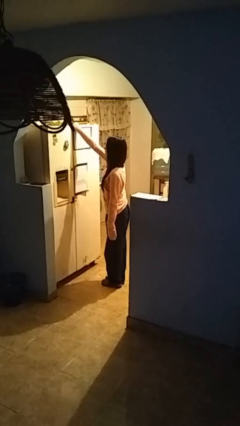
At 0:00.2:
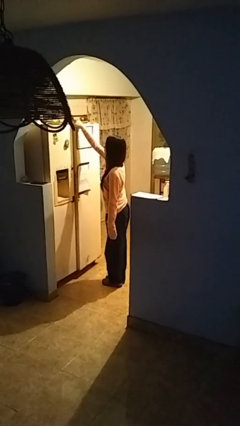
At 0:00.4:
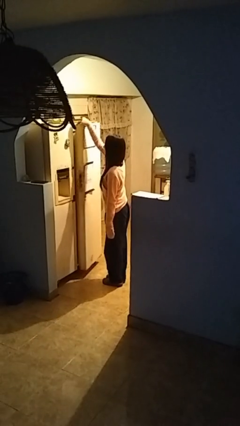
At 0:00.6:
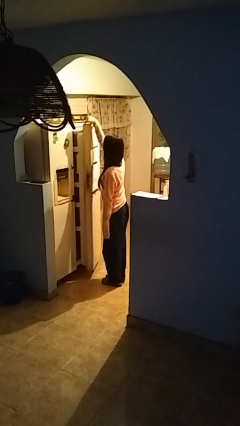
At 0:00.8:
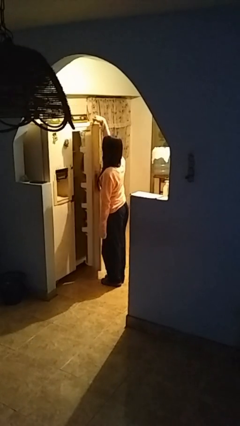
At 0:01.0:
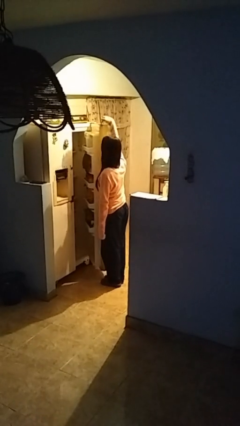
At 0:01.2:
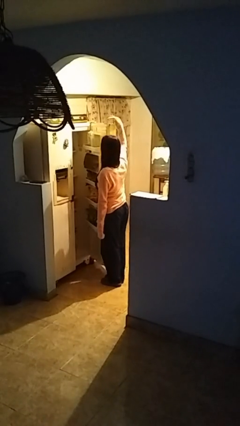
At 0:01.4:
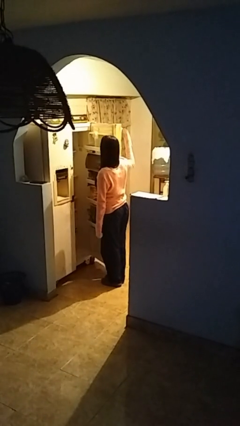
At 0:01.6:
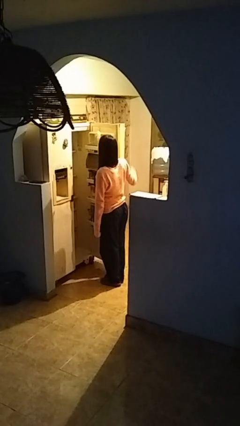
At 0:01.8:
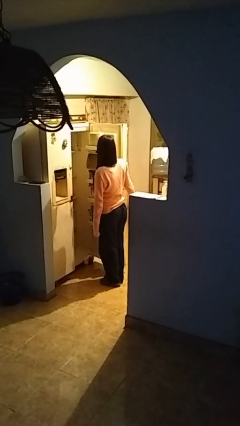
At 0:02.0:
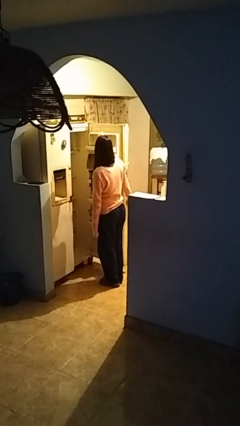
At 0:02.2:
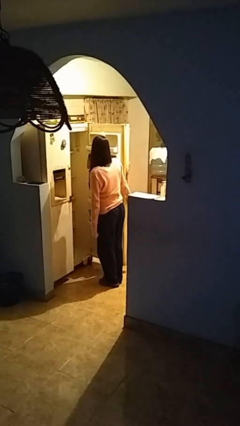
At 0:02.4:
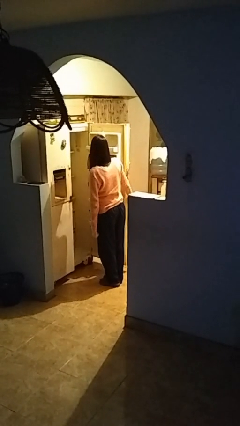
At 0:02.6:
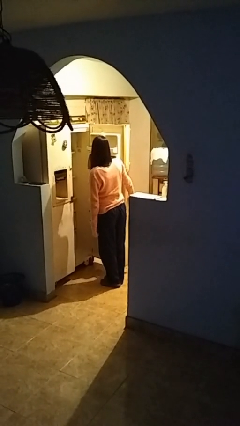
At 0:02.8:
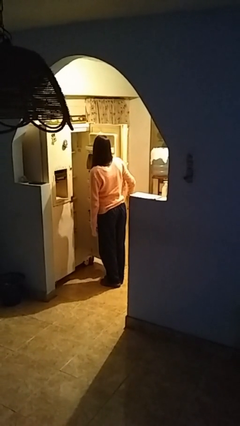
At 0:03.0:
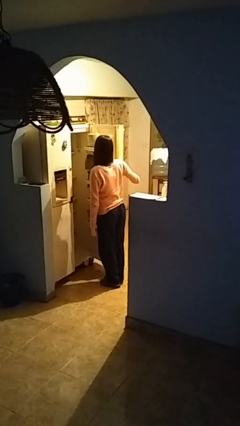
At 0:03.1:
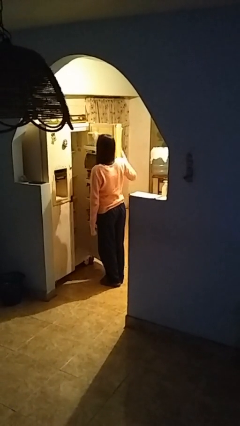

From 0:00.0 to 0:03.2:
person opens refrigerator

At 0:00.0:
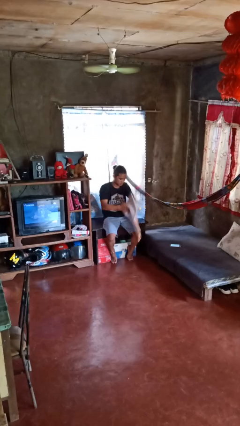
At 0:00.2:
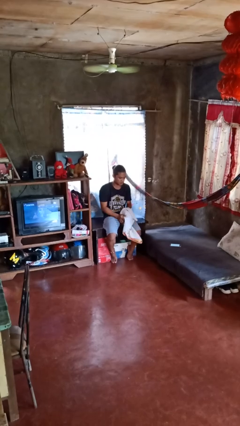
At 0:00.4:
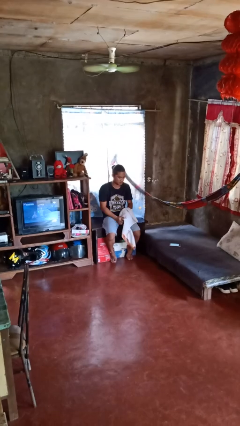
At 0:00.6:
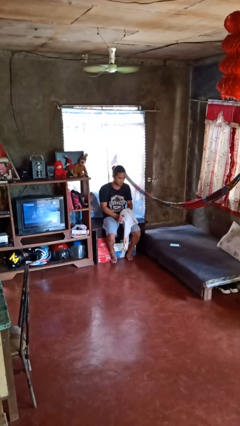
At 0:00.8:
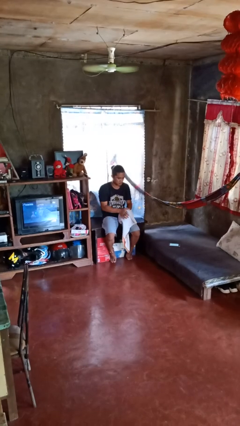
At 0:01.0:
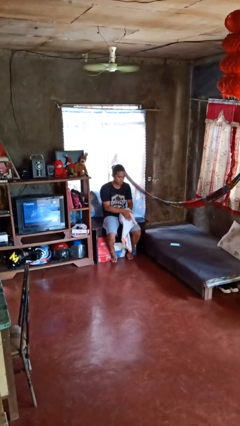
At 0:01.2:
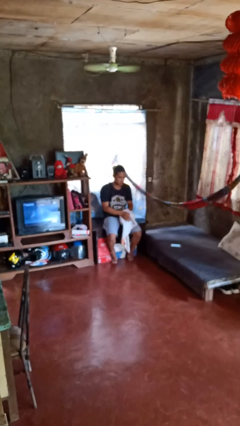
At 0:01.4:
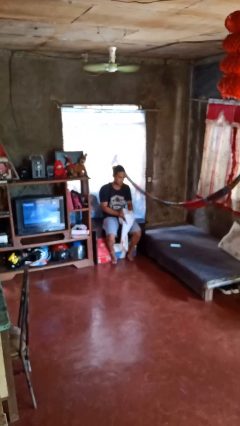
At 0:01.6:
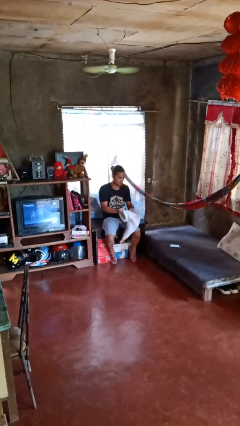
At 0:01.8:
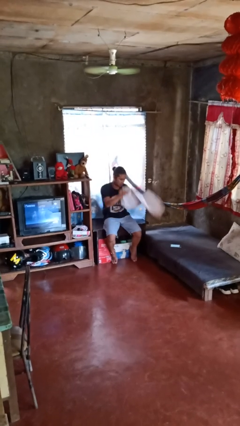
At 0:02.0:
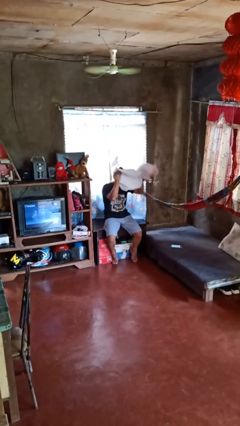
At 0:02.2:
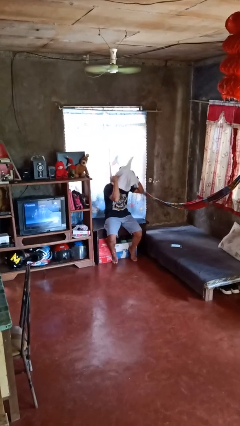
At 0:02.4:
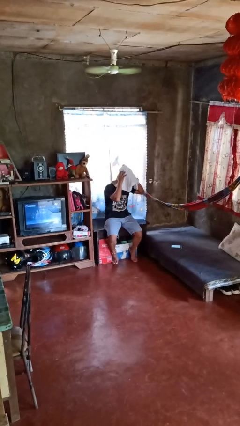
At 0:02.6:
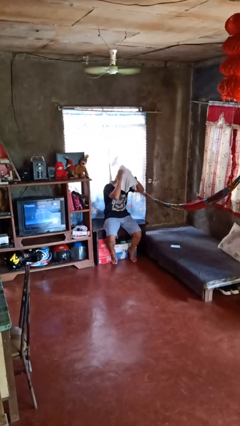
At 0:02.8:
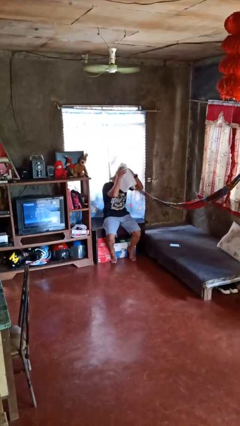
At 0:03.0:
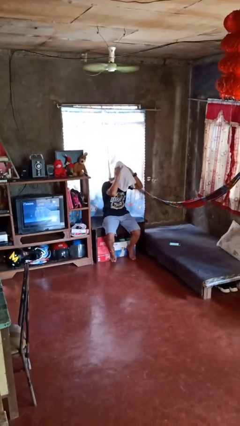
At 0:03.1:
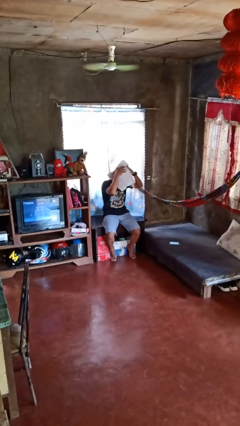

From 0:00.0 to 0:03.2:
person wraps box

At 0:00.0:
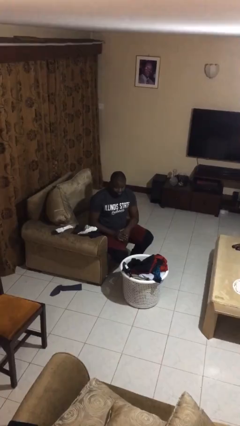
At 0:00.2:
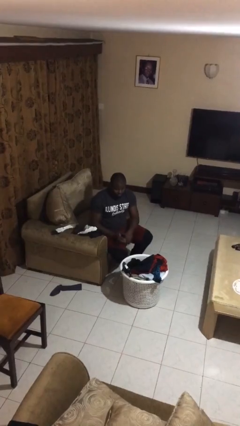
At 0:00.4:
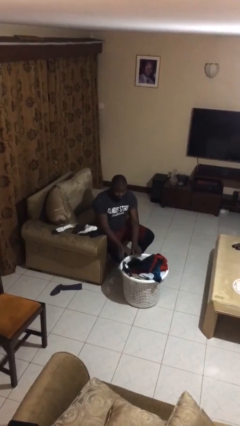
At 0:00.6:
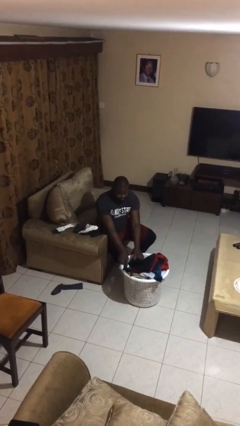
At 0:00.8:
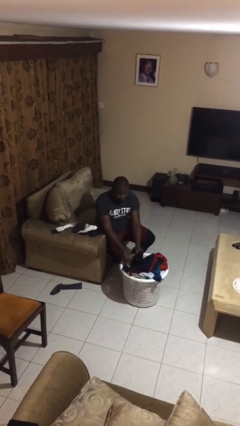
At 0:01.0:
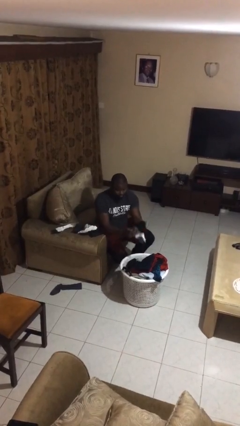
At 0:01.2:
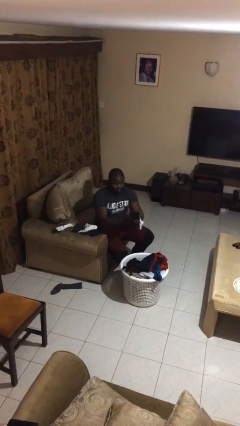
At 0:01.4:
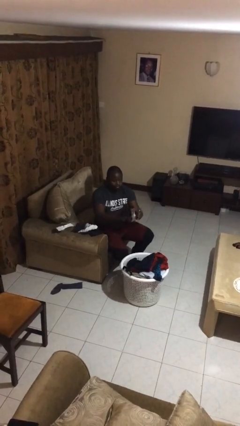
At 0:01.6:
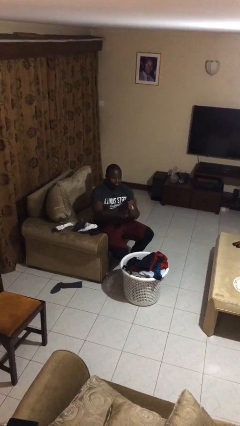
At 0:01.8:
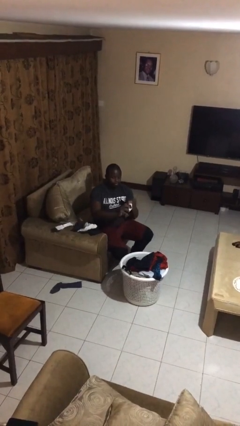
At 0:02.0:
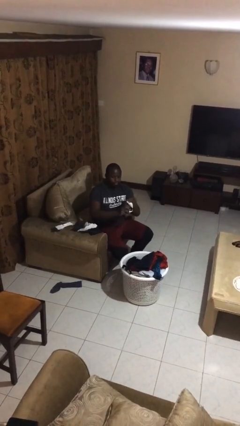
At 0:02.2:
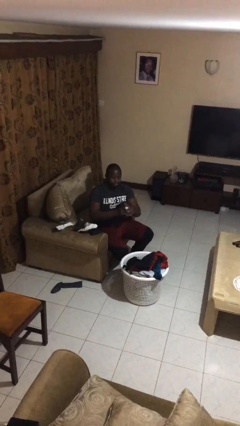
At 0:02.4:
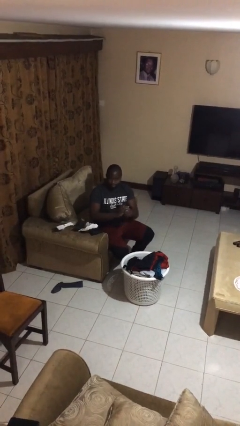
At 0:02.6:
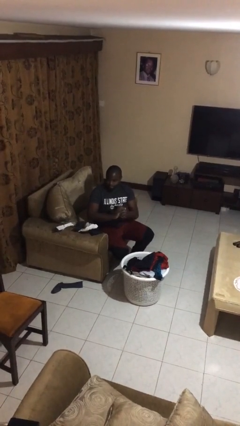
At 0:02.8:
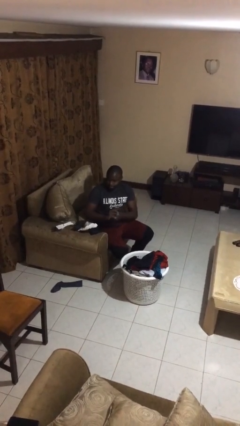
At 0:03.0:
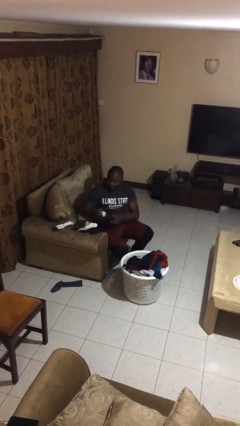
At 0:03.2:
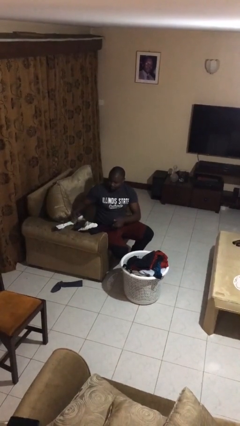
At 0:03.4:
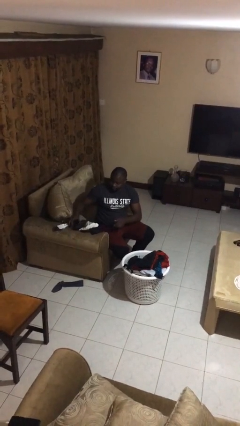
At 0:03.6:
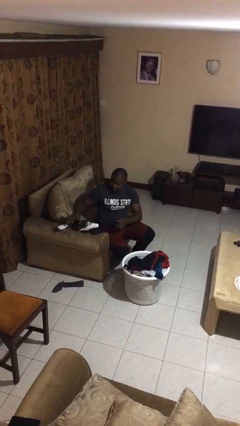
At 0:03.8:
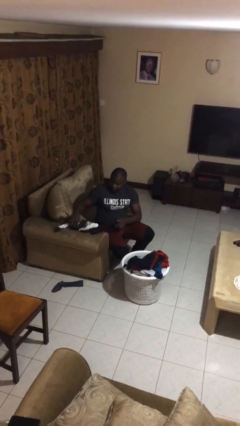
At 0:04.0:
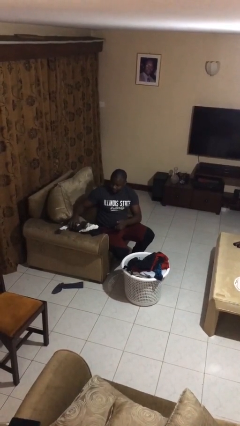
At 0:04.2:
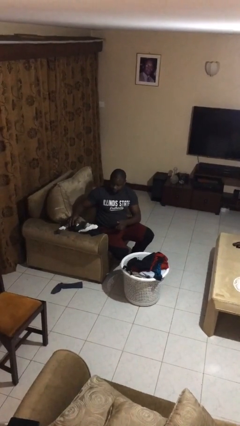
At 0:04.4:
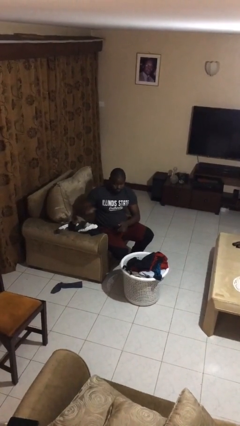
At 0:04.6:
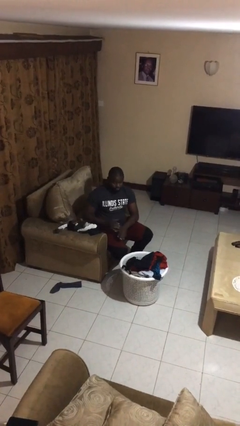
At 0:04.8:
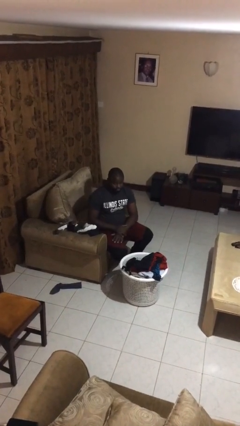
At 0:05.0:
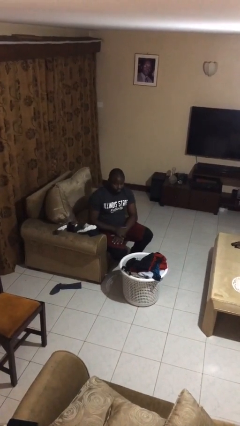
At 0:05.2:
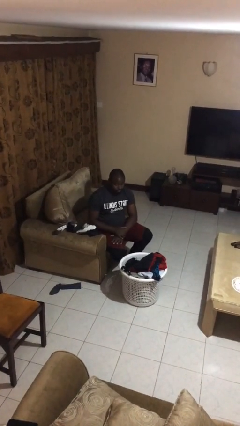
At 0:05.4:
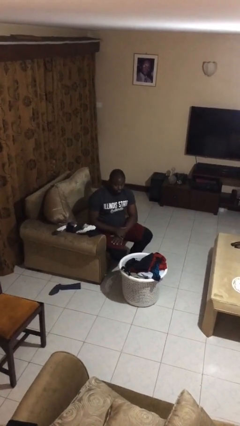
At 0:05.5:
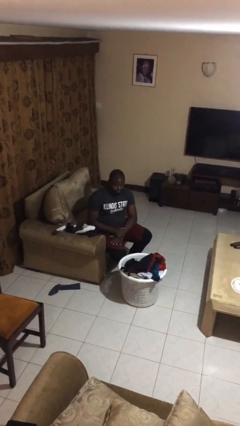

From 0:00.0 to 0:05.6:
person folds socks

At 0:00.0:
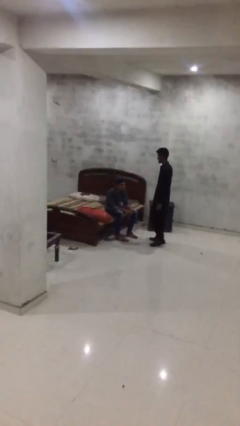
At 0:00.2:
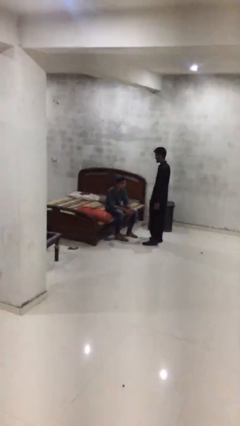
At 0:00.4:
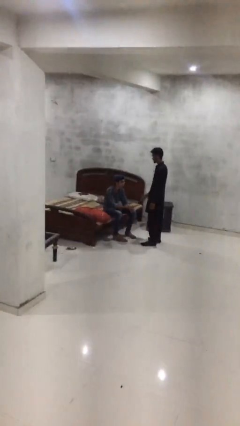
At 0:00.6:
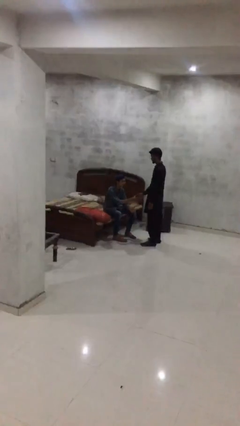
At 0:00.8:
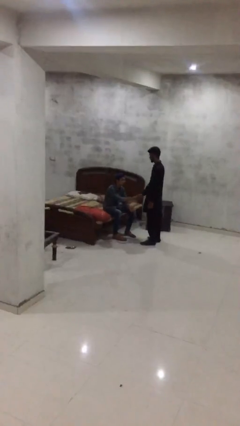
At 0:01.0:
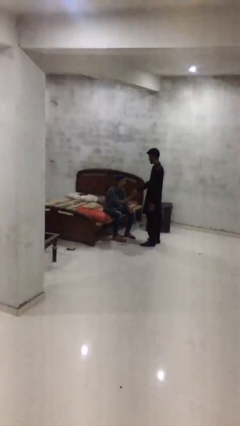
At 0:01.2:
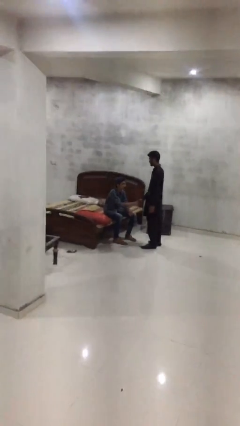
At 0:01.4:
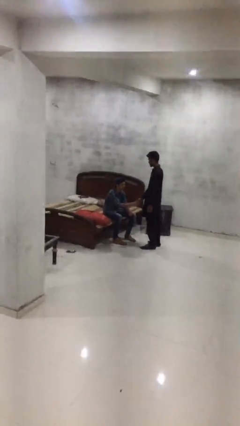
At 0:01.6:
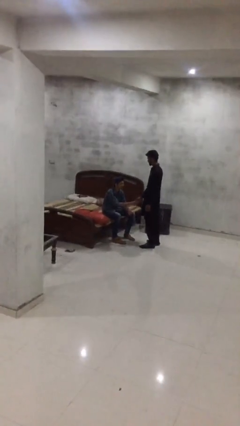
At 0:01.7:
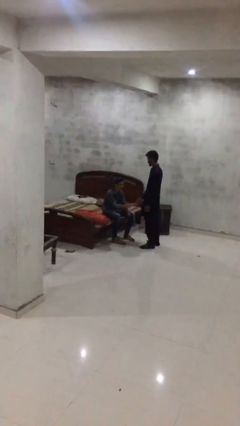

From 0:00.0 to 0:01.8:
person shakes hand

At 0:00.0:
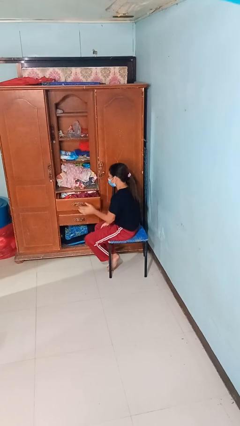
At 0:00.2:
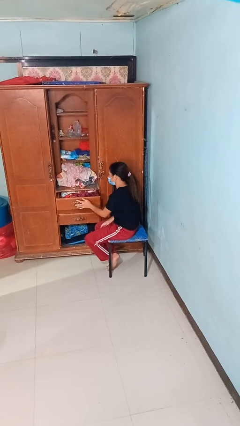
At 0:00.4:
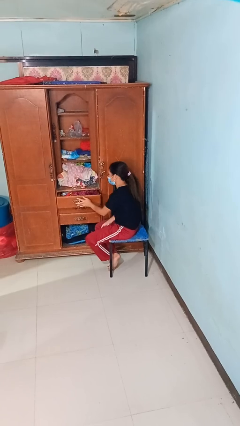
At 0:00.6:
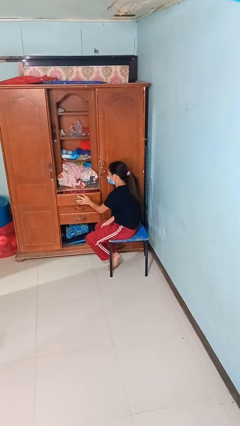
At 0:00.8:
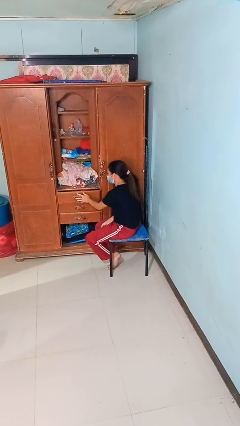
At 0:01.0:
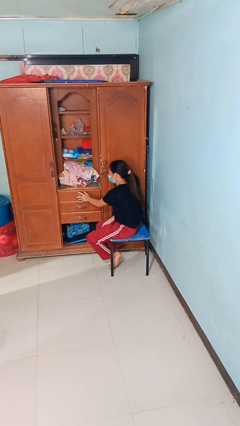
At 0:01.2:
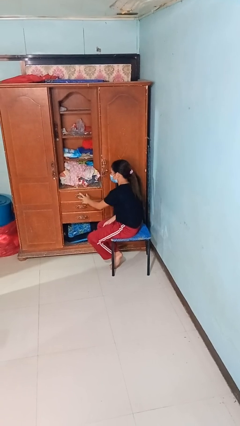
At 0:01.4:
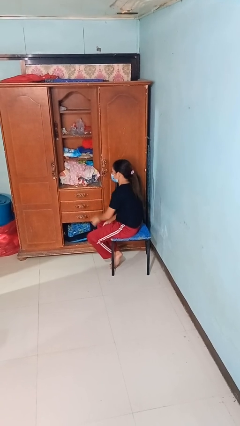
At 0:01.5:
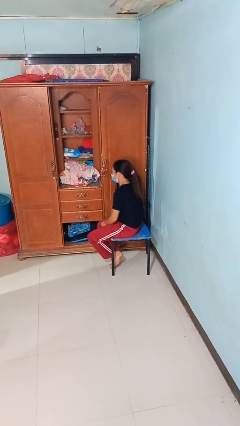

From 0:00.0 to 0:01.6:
person closes dresser drawer

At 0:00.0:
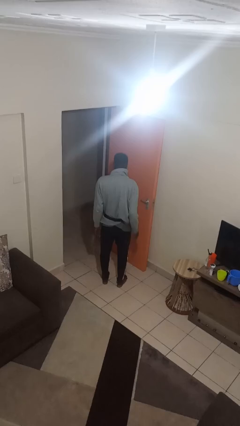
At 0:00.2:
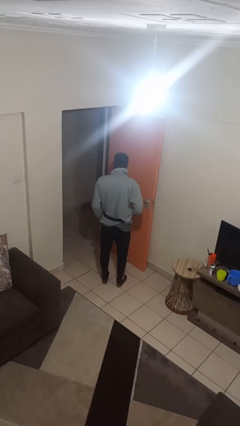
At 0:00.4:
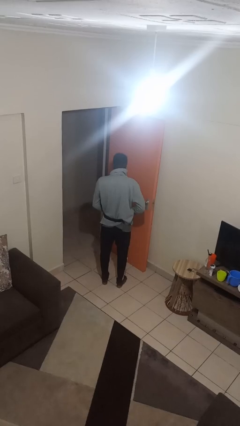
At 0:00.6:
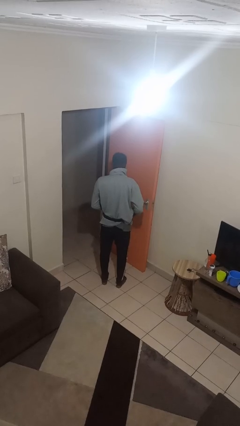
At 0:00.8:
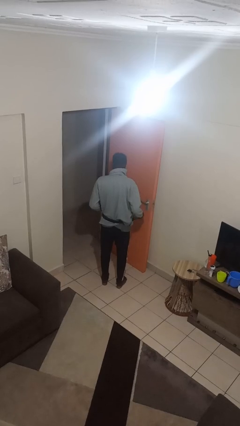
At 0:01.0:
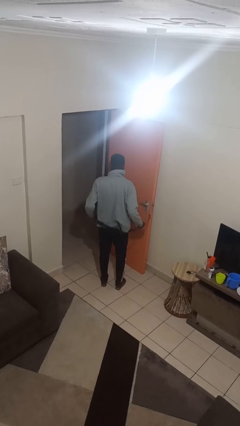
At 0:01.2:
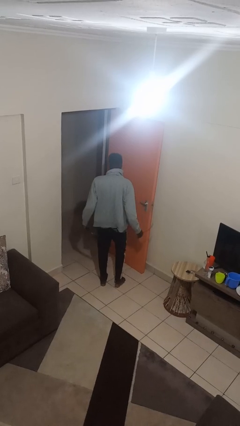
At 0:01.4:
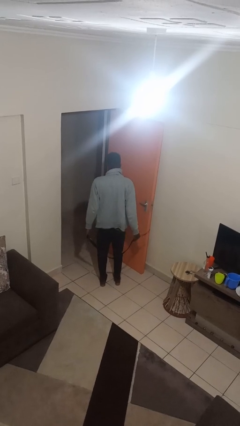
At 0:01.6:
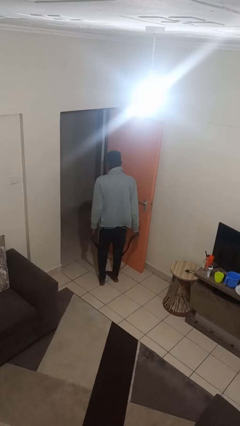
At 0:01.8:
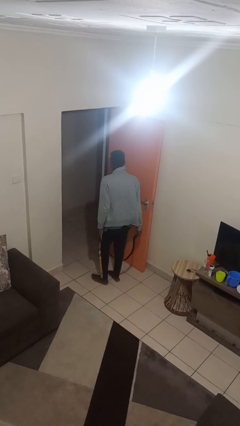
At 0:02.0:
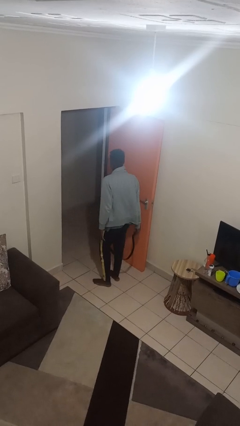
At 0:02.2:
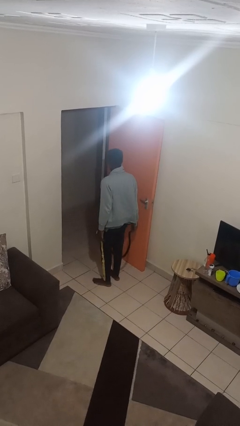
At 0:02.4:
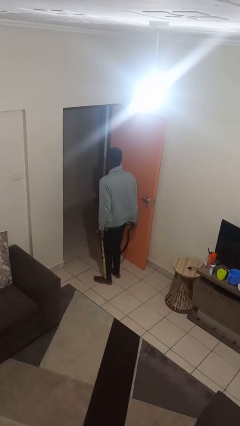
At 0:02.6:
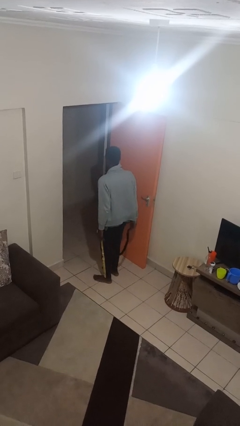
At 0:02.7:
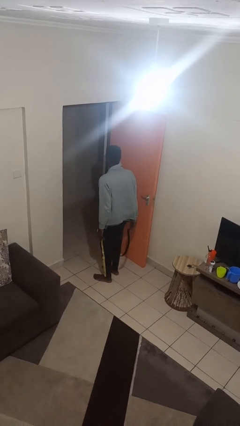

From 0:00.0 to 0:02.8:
person takes off belt
